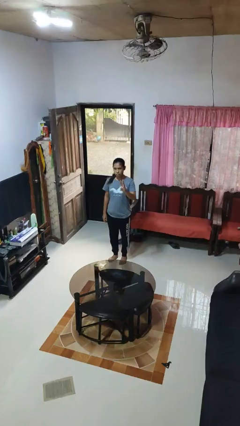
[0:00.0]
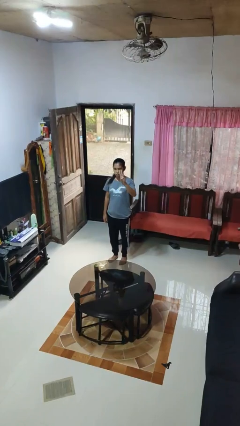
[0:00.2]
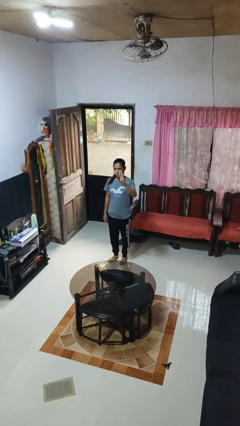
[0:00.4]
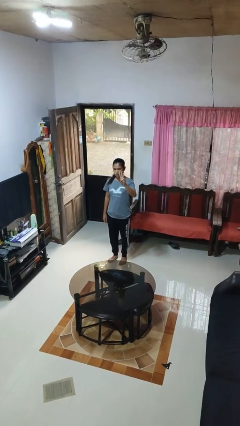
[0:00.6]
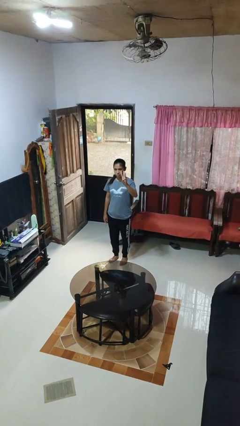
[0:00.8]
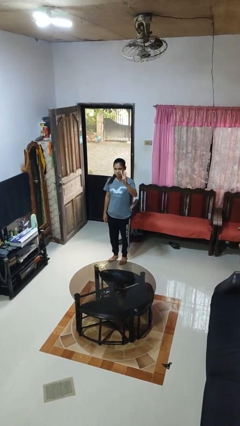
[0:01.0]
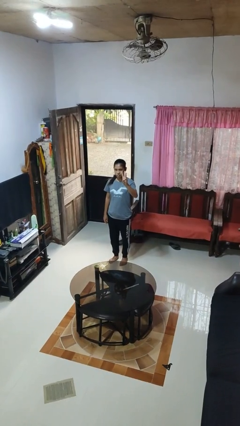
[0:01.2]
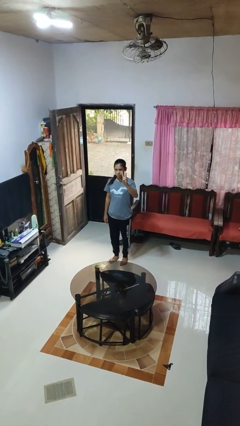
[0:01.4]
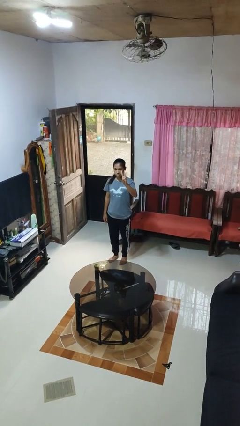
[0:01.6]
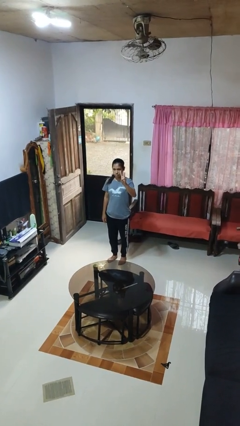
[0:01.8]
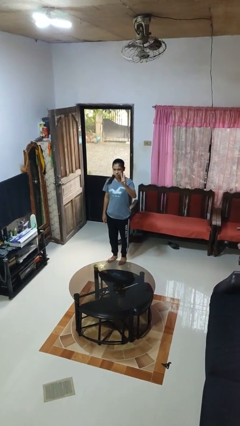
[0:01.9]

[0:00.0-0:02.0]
person gestures number three

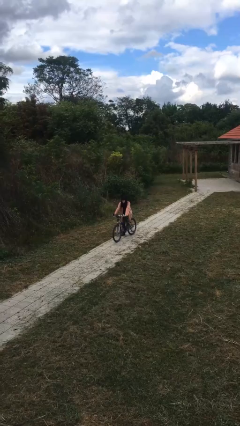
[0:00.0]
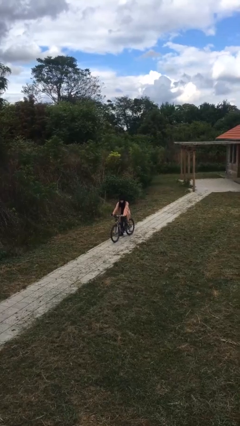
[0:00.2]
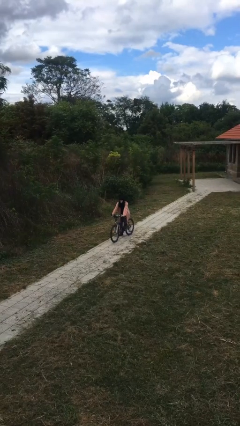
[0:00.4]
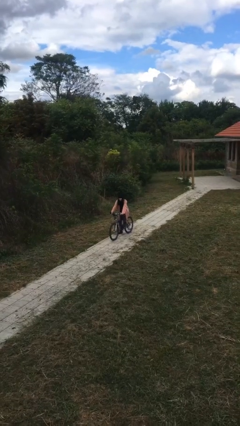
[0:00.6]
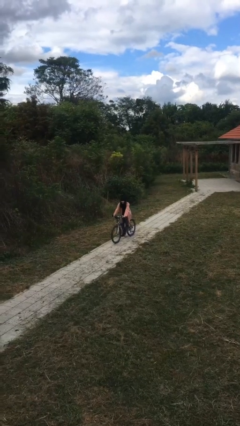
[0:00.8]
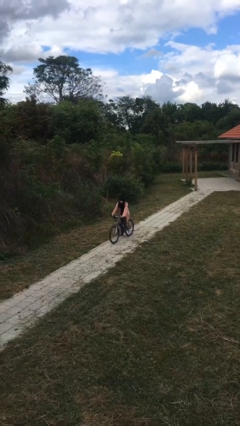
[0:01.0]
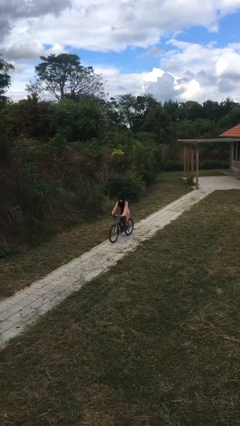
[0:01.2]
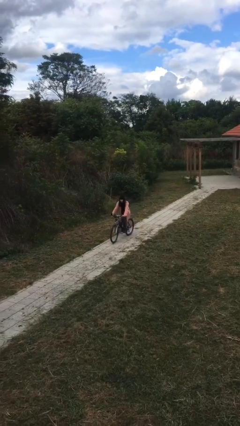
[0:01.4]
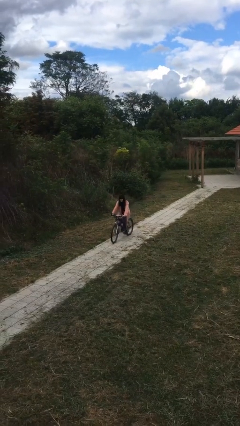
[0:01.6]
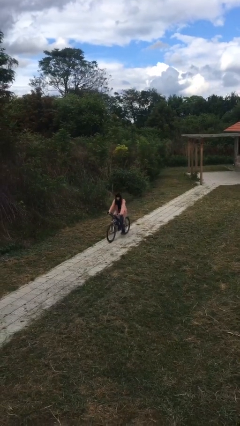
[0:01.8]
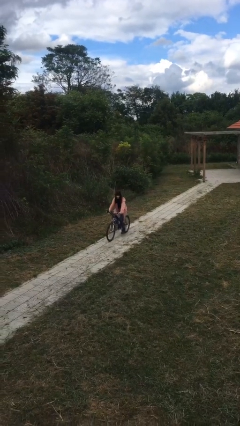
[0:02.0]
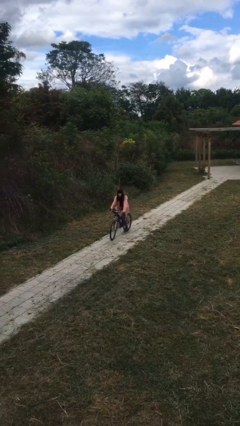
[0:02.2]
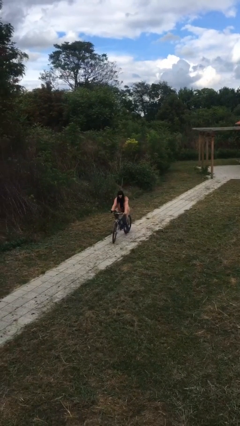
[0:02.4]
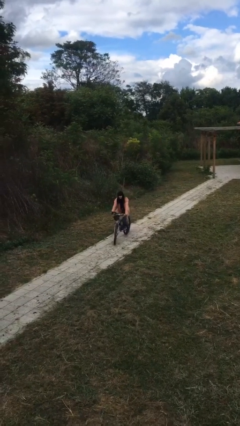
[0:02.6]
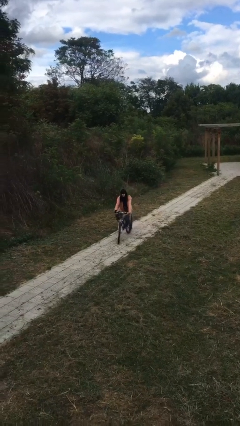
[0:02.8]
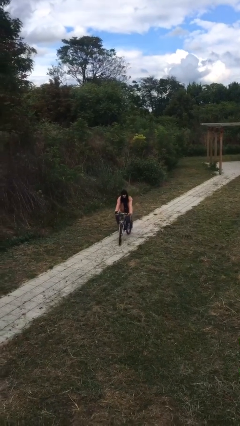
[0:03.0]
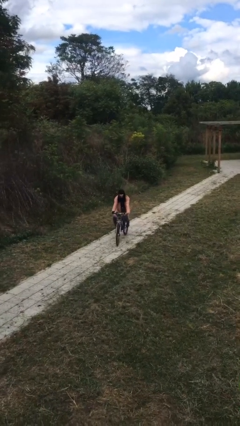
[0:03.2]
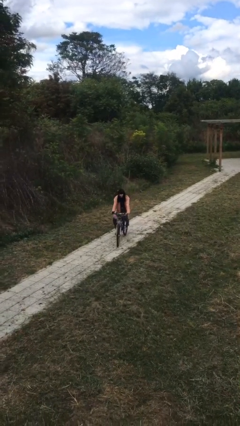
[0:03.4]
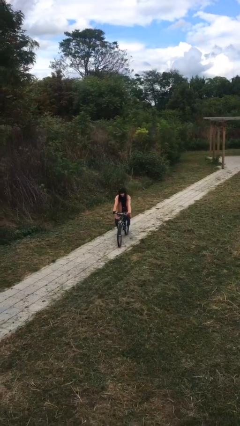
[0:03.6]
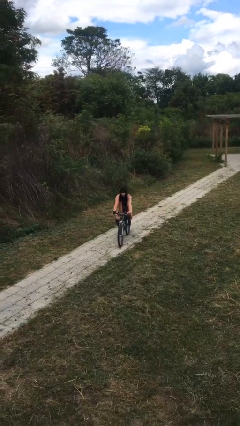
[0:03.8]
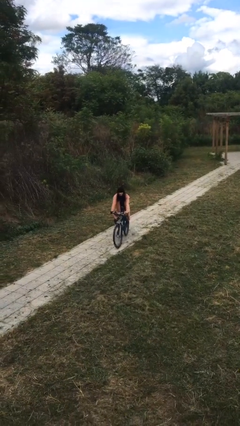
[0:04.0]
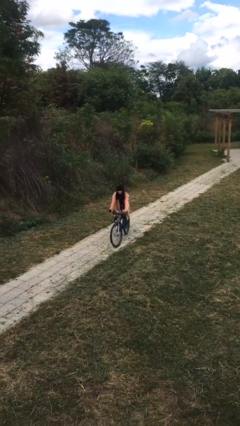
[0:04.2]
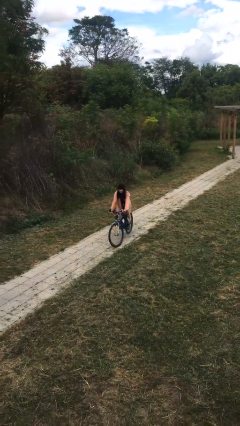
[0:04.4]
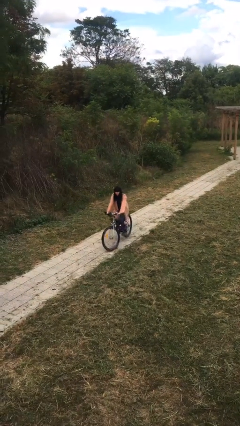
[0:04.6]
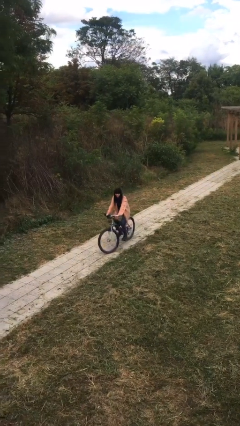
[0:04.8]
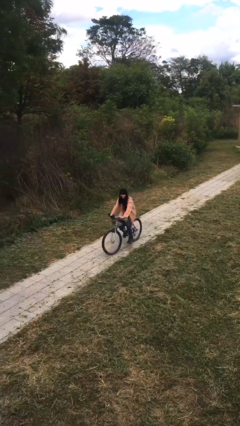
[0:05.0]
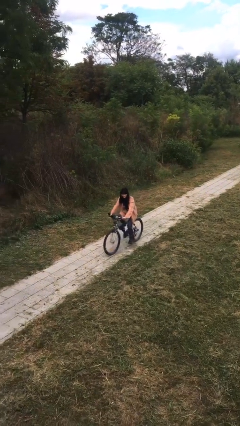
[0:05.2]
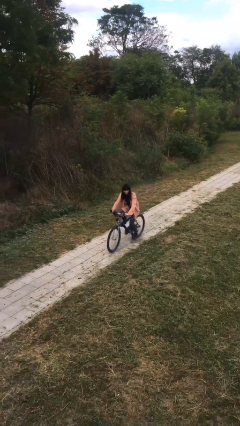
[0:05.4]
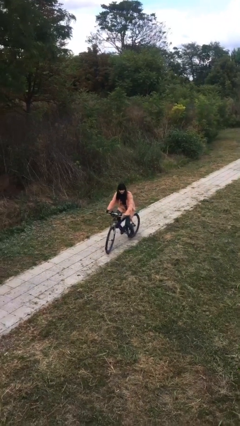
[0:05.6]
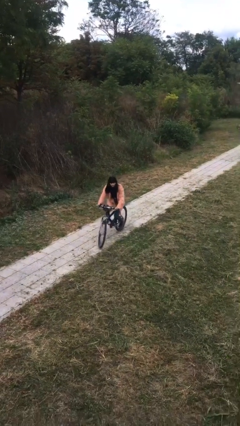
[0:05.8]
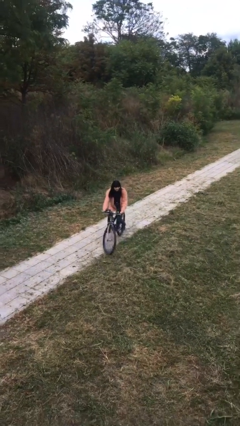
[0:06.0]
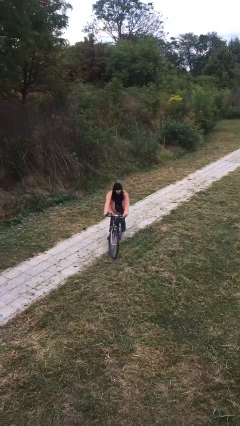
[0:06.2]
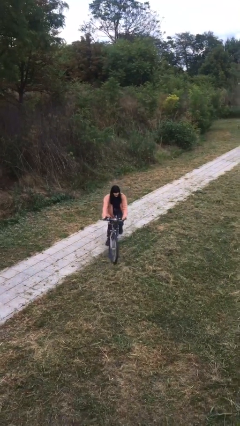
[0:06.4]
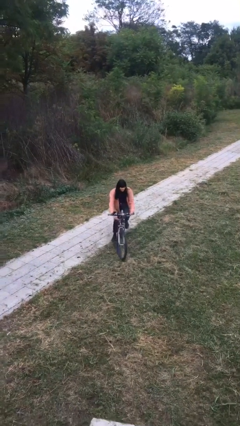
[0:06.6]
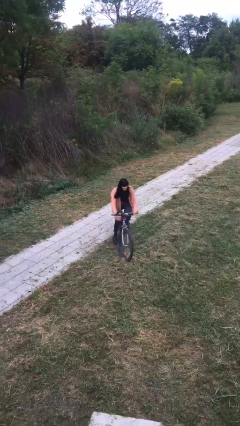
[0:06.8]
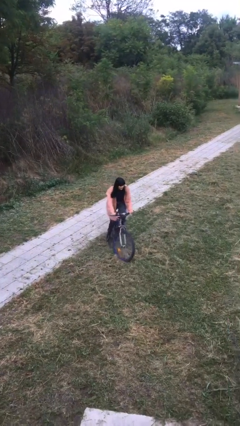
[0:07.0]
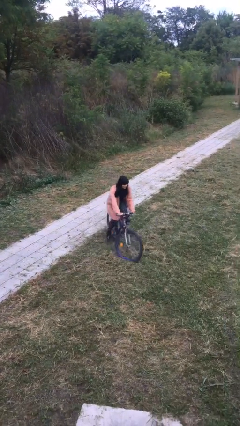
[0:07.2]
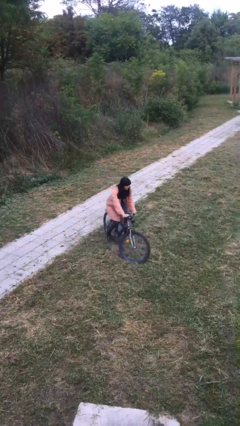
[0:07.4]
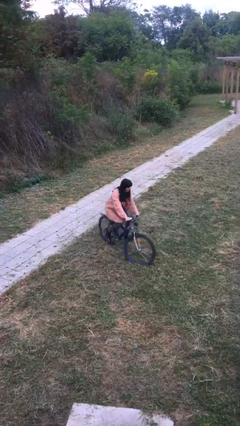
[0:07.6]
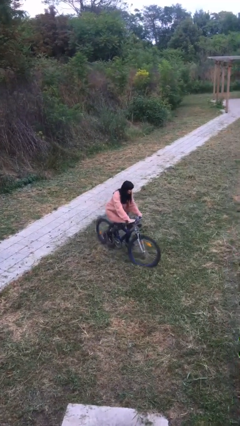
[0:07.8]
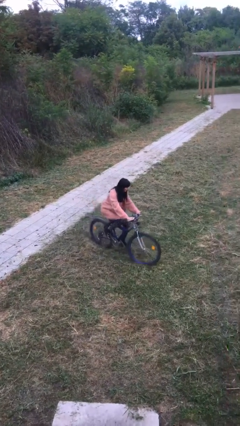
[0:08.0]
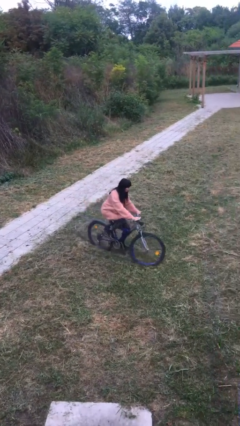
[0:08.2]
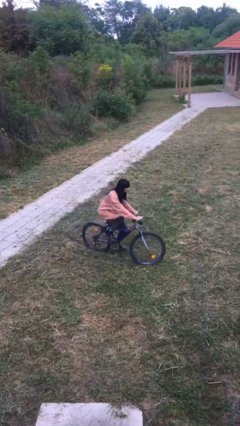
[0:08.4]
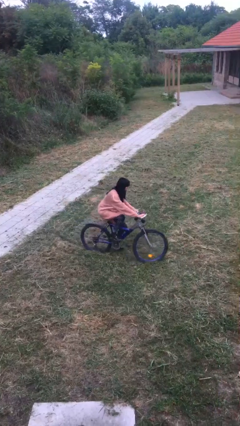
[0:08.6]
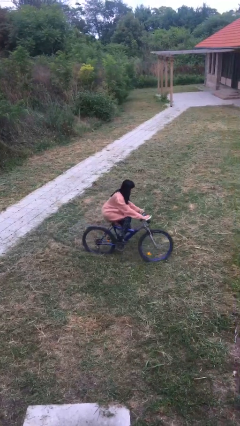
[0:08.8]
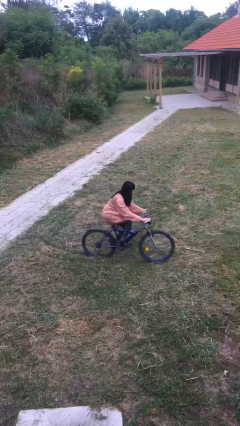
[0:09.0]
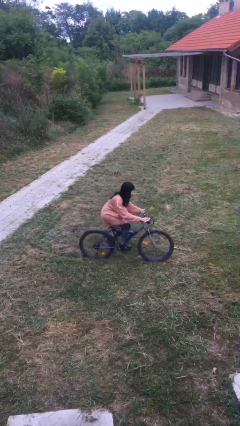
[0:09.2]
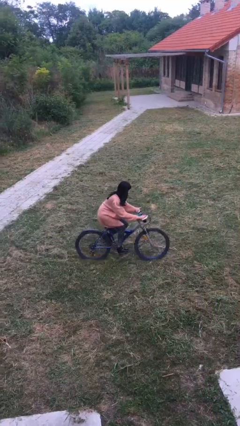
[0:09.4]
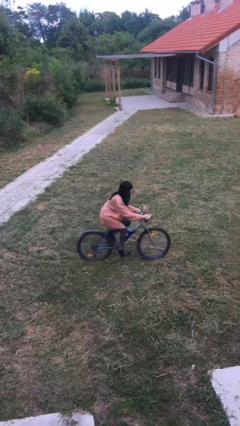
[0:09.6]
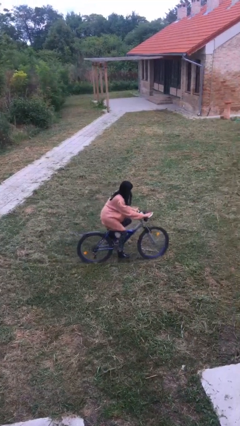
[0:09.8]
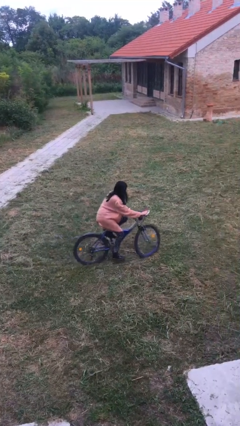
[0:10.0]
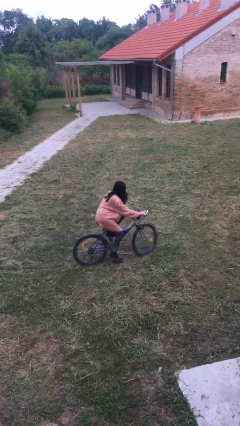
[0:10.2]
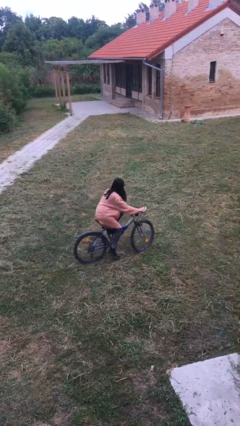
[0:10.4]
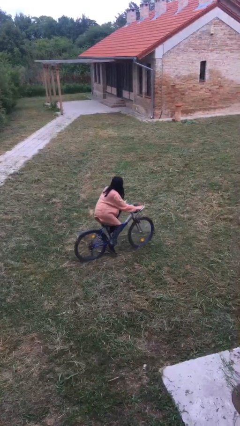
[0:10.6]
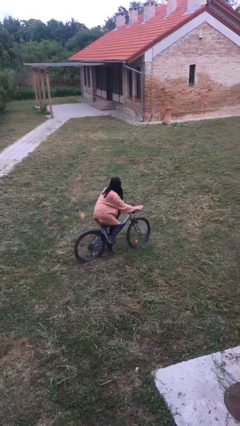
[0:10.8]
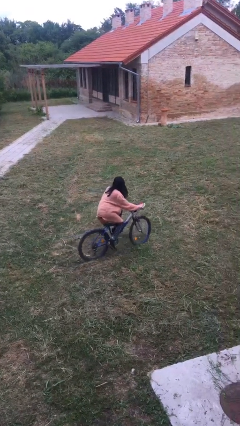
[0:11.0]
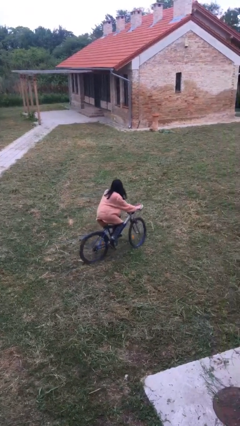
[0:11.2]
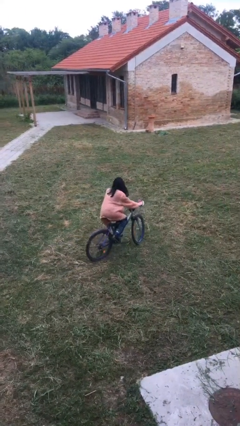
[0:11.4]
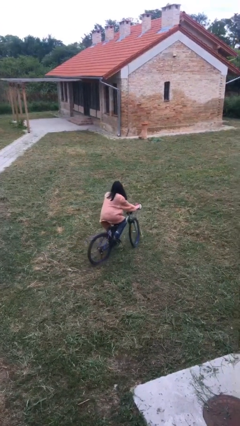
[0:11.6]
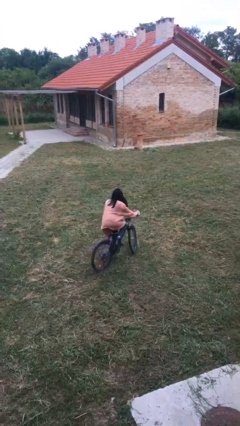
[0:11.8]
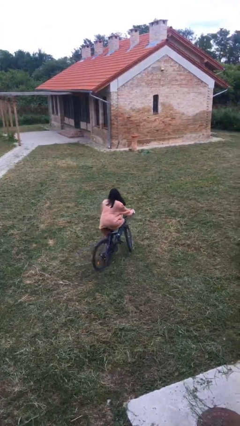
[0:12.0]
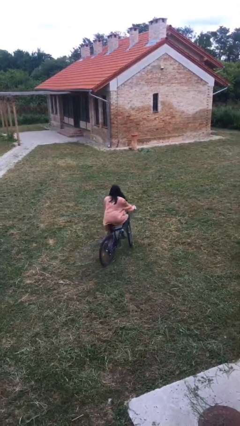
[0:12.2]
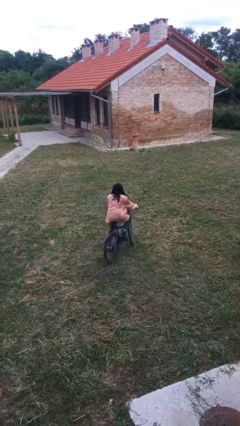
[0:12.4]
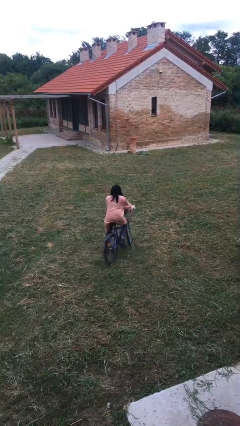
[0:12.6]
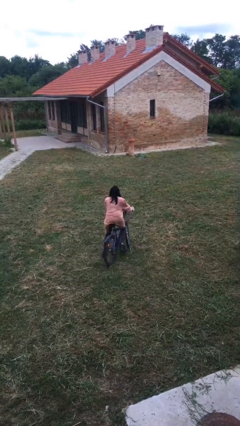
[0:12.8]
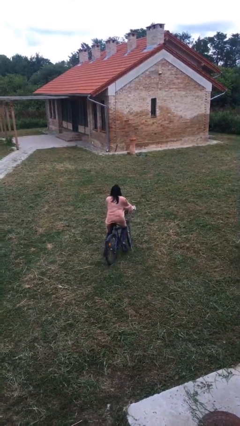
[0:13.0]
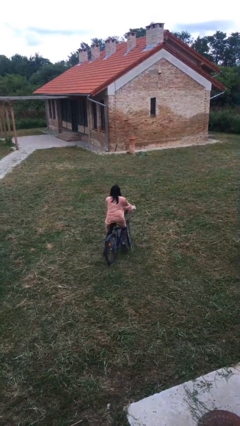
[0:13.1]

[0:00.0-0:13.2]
person rides bicycle

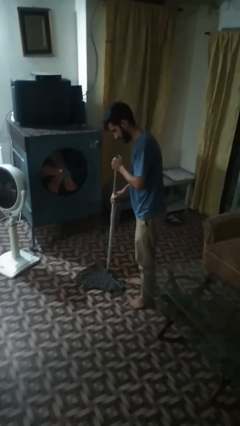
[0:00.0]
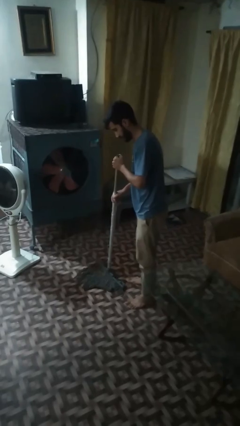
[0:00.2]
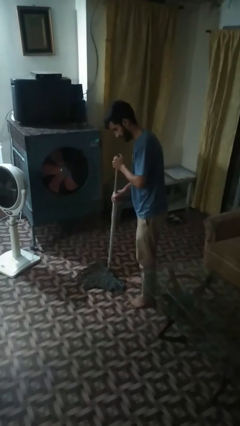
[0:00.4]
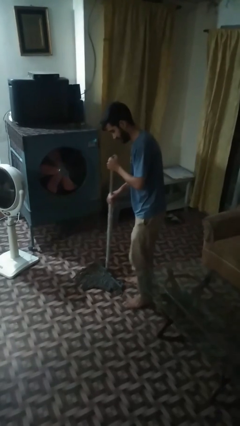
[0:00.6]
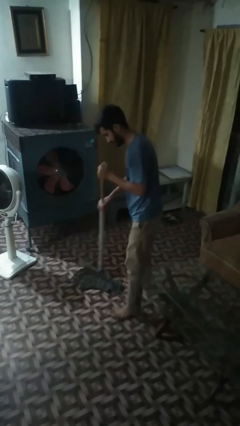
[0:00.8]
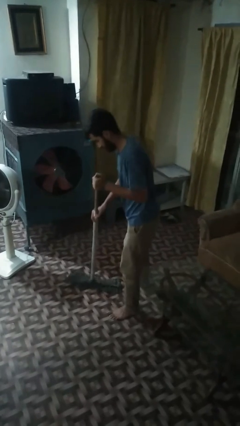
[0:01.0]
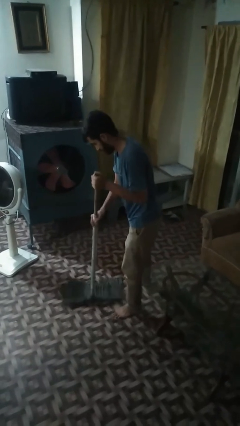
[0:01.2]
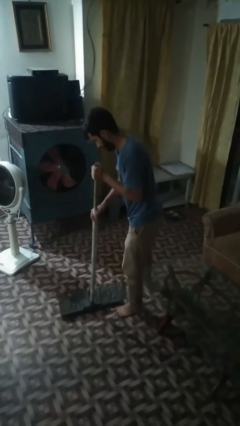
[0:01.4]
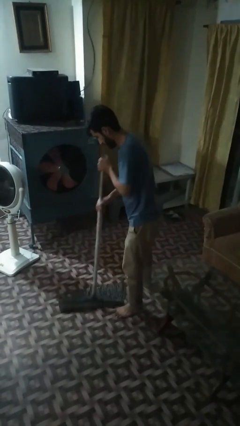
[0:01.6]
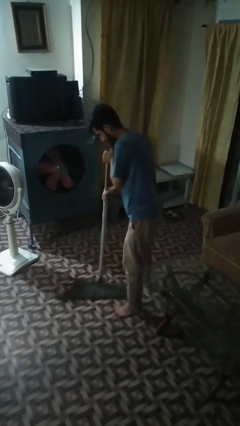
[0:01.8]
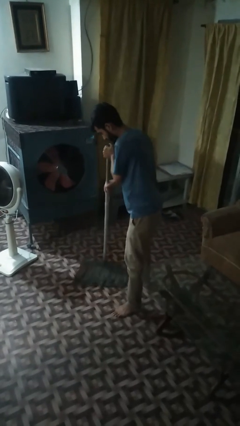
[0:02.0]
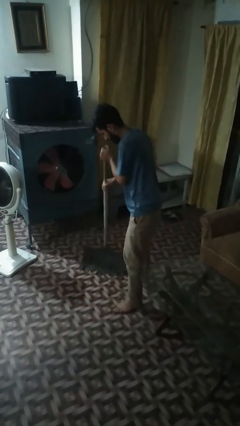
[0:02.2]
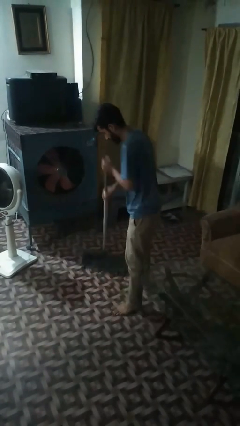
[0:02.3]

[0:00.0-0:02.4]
person mops
